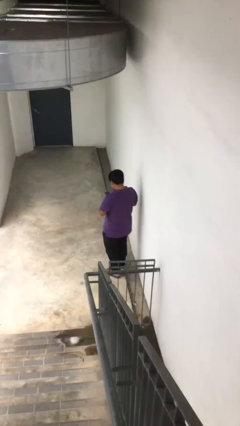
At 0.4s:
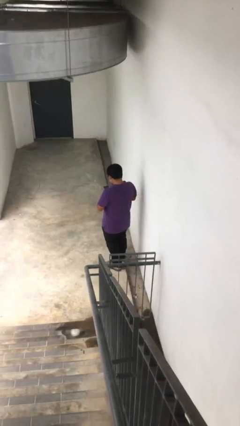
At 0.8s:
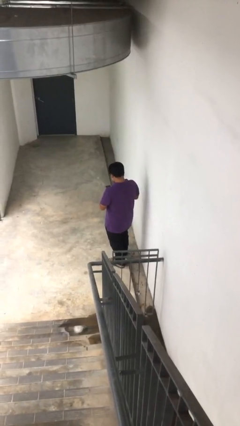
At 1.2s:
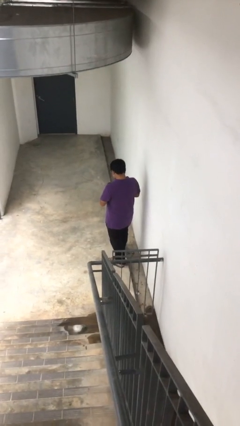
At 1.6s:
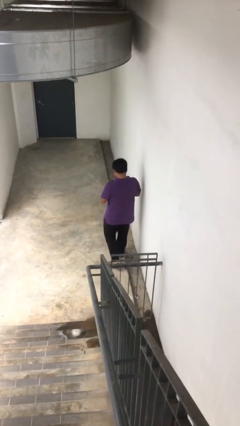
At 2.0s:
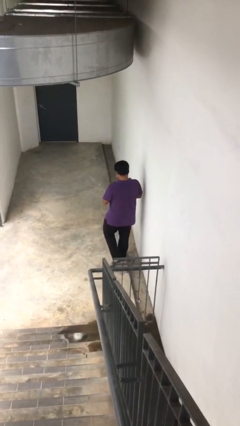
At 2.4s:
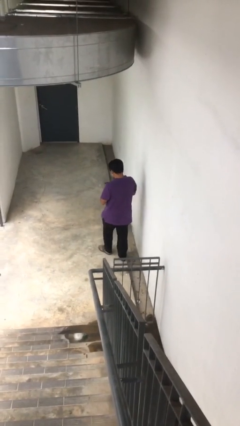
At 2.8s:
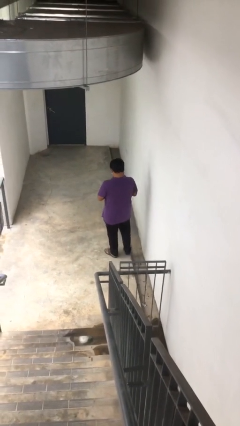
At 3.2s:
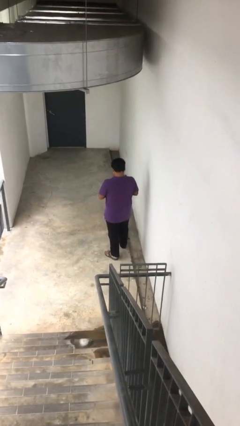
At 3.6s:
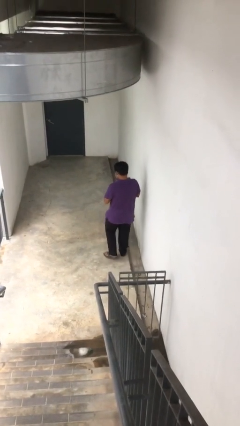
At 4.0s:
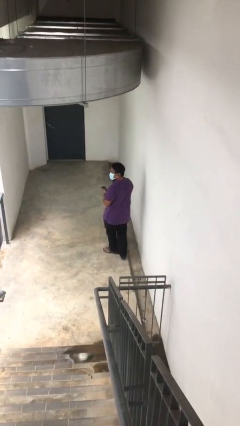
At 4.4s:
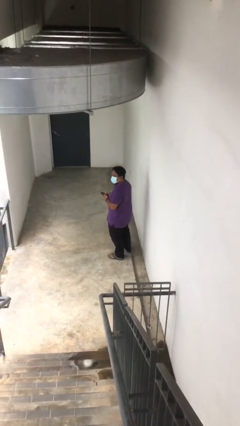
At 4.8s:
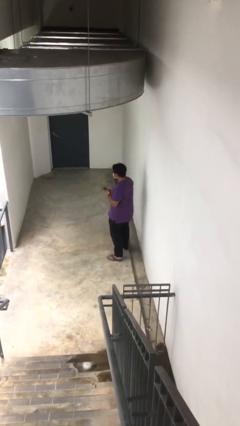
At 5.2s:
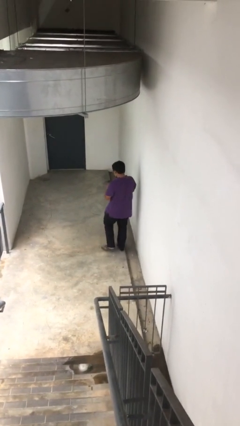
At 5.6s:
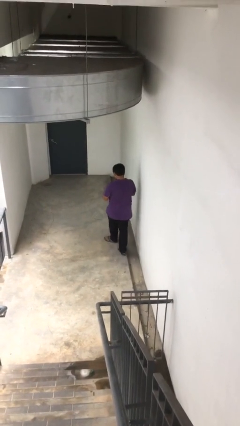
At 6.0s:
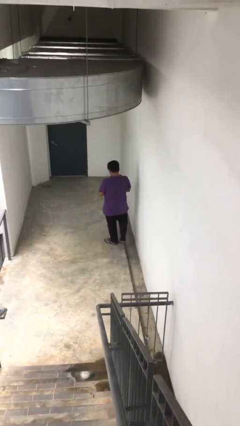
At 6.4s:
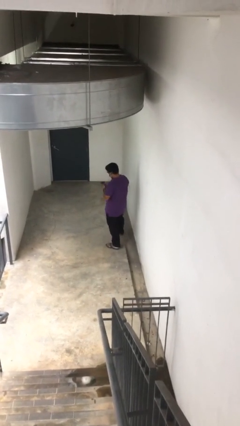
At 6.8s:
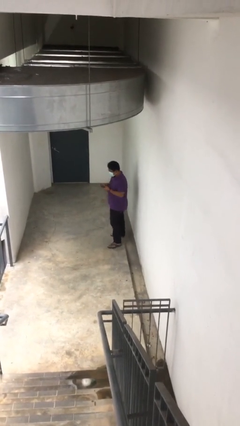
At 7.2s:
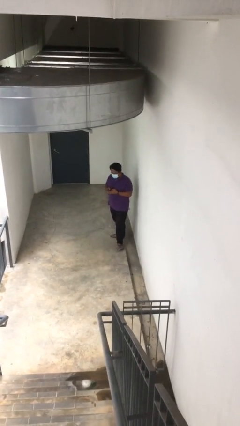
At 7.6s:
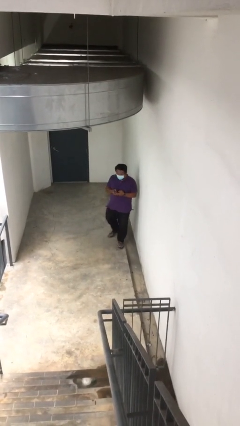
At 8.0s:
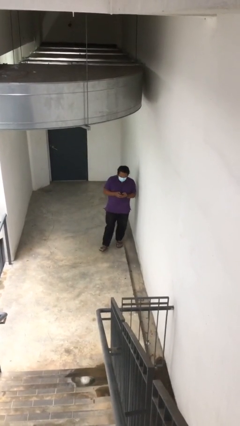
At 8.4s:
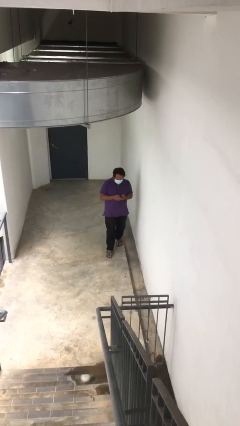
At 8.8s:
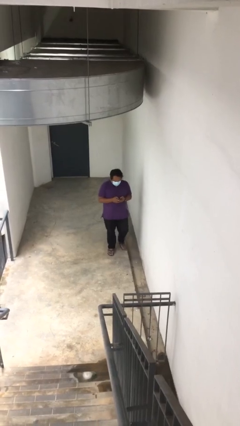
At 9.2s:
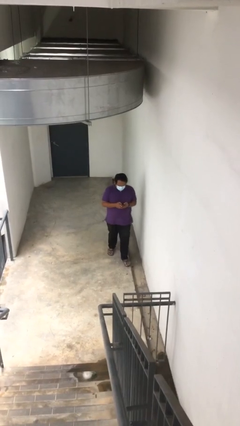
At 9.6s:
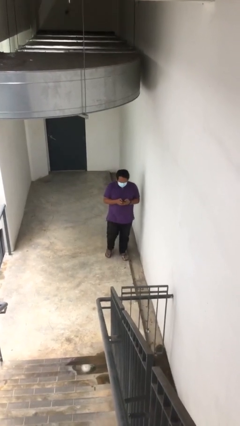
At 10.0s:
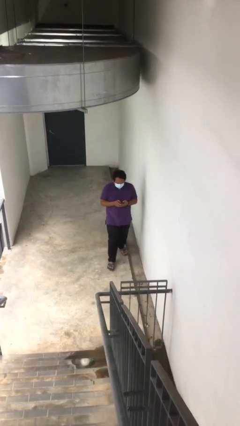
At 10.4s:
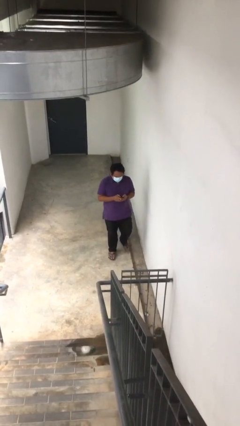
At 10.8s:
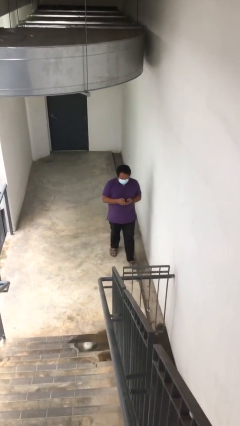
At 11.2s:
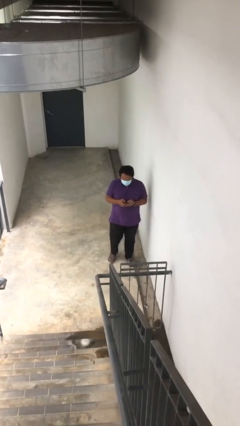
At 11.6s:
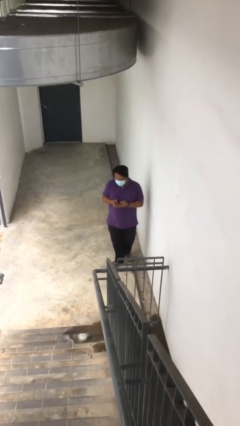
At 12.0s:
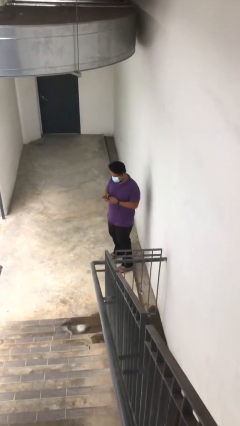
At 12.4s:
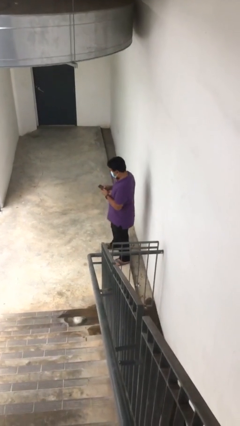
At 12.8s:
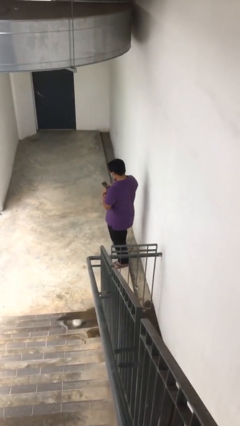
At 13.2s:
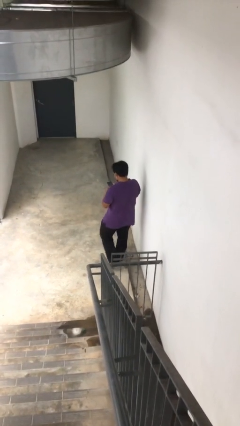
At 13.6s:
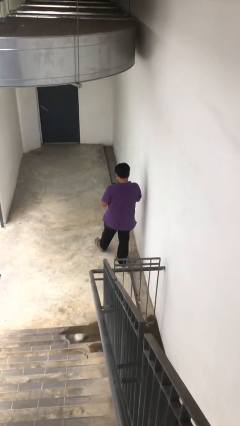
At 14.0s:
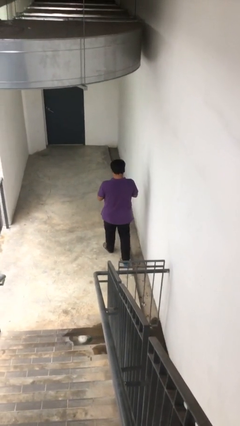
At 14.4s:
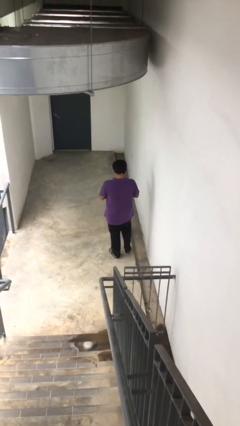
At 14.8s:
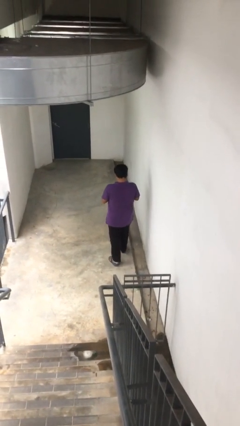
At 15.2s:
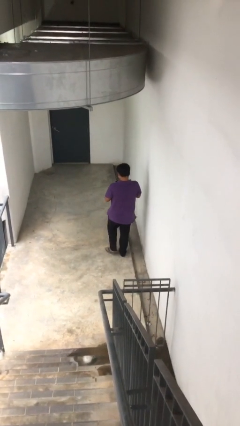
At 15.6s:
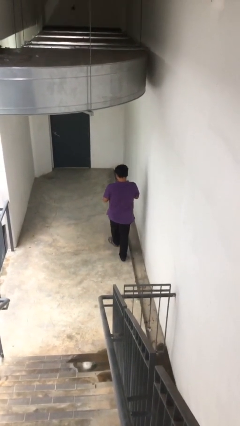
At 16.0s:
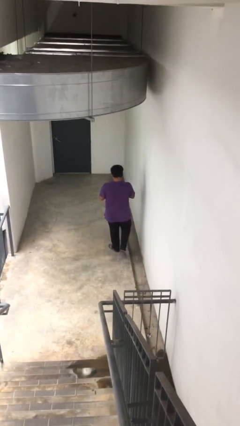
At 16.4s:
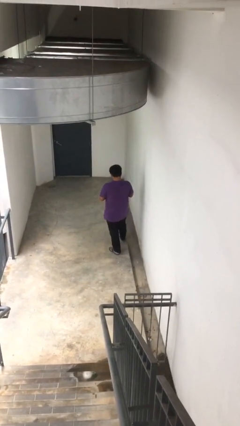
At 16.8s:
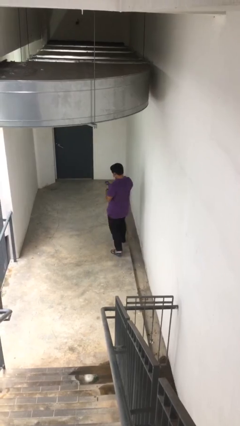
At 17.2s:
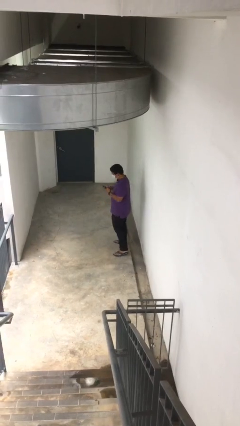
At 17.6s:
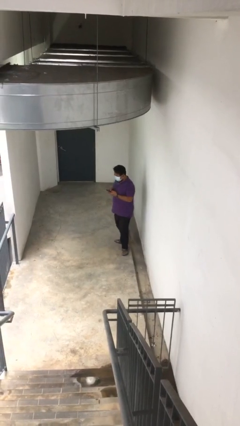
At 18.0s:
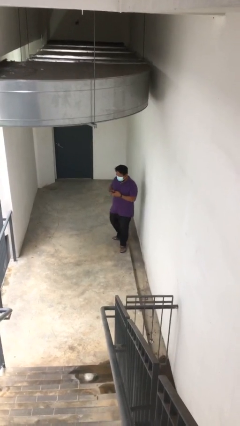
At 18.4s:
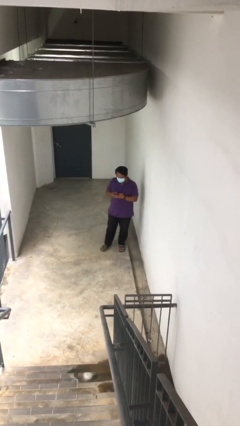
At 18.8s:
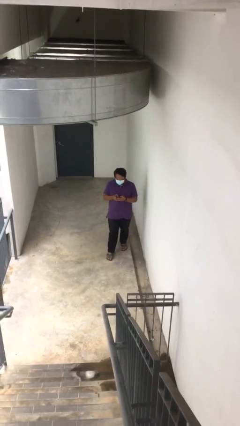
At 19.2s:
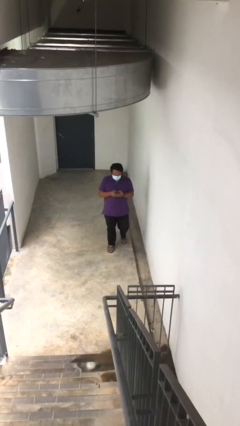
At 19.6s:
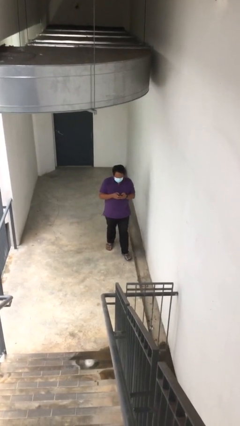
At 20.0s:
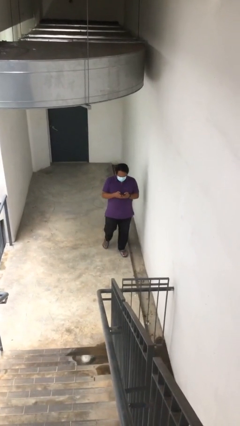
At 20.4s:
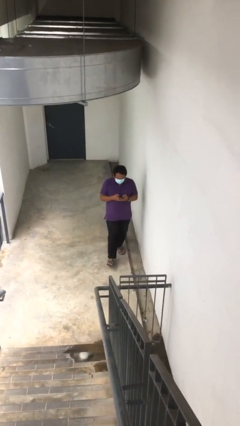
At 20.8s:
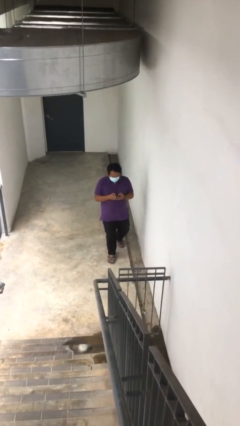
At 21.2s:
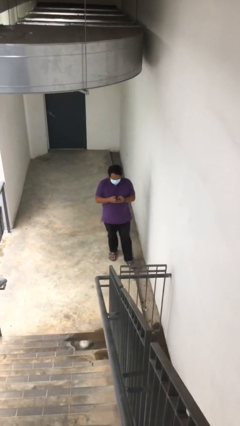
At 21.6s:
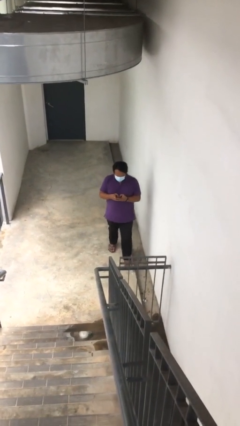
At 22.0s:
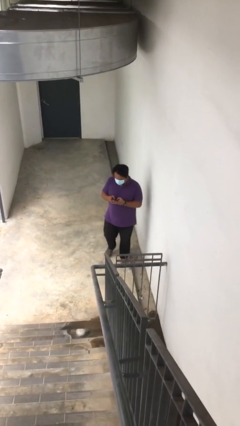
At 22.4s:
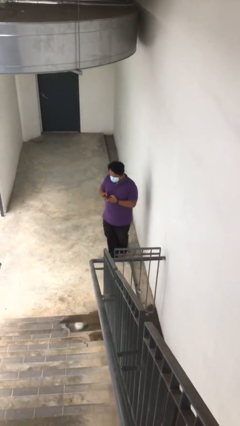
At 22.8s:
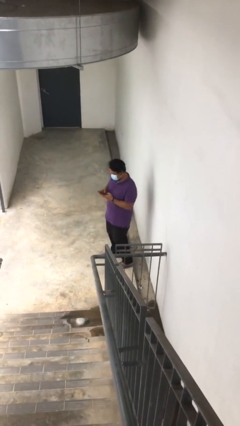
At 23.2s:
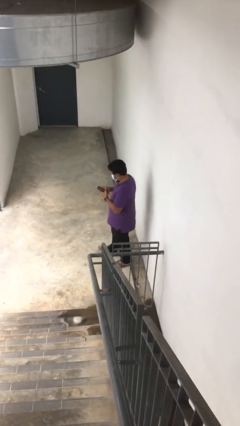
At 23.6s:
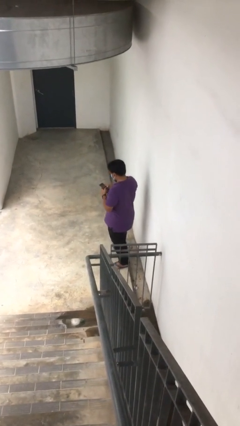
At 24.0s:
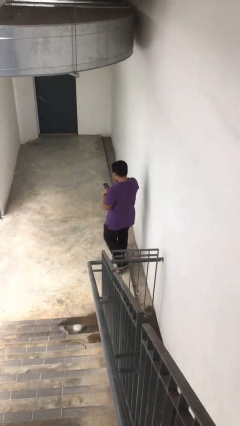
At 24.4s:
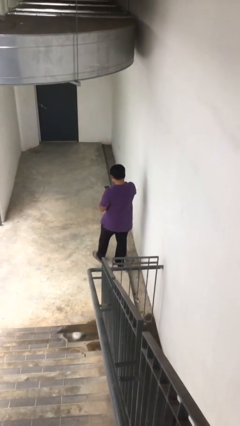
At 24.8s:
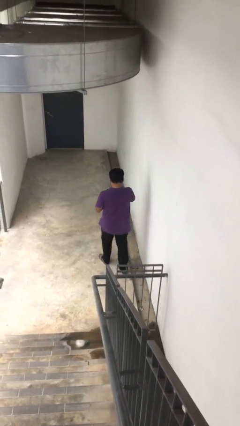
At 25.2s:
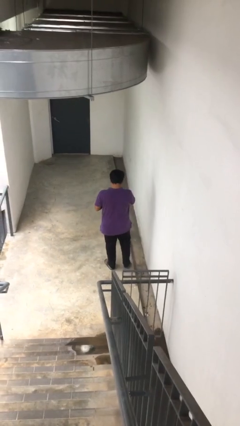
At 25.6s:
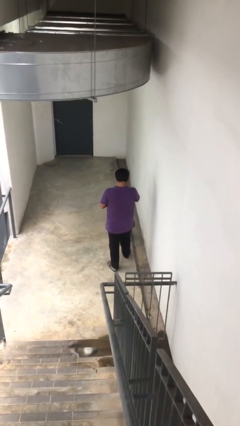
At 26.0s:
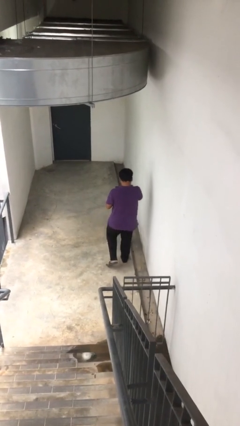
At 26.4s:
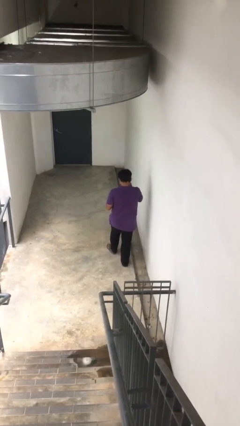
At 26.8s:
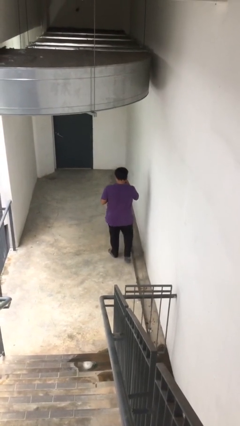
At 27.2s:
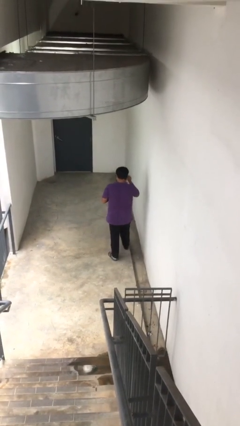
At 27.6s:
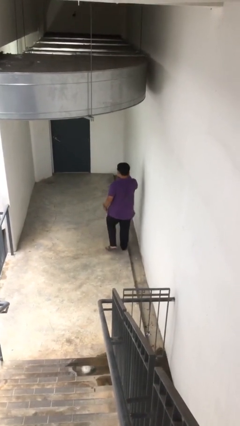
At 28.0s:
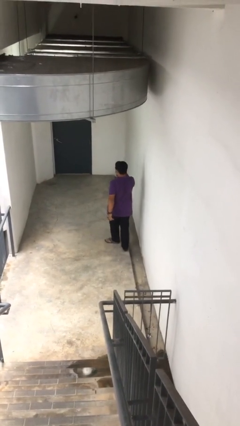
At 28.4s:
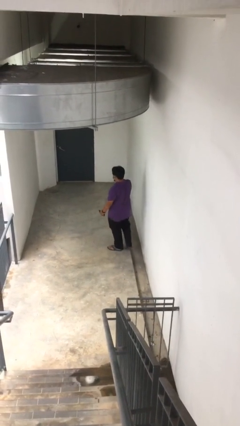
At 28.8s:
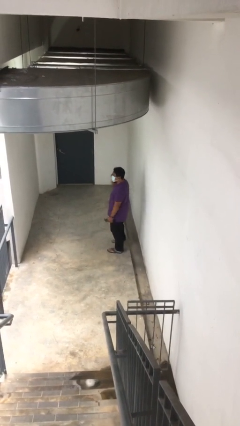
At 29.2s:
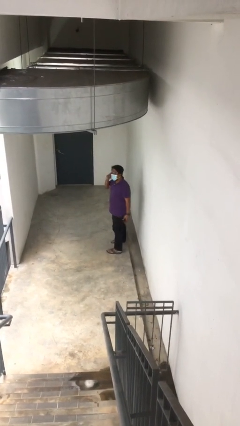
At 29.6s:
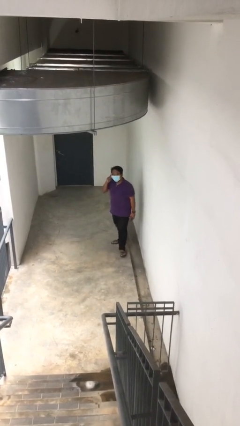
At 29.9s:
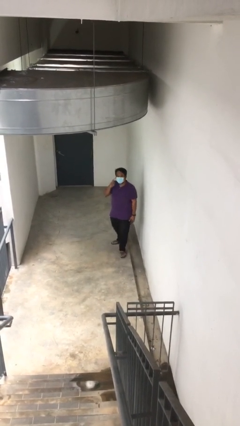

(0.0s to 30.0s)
person walks

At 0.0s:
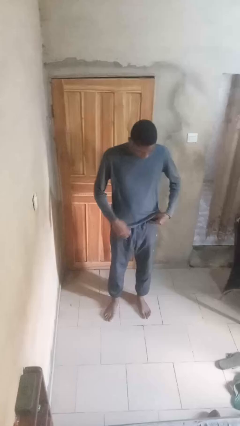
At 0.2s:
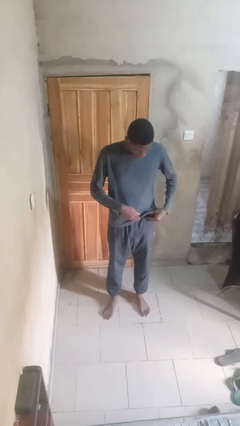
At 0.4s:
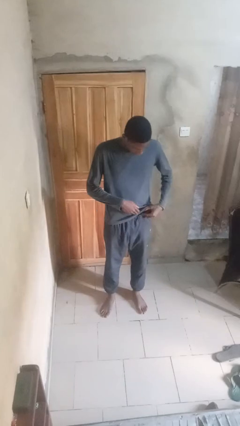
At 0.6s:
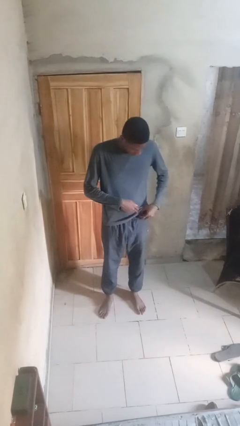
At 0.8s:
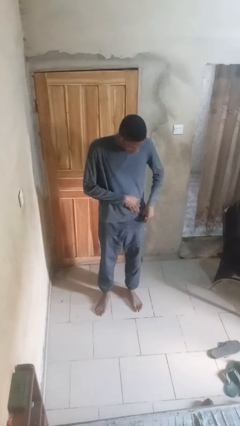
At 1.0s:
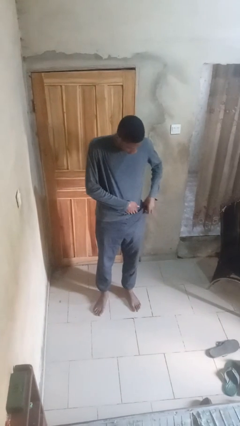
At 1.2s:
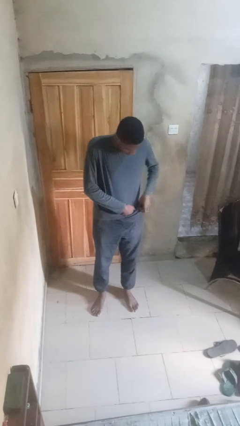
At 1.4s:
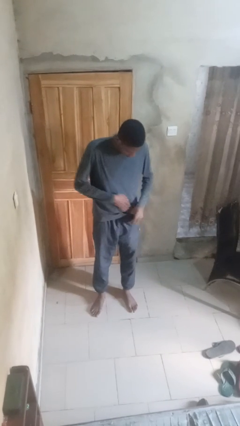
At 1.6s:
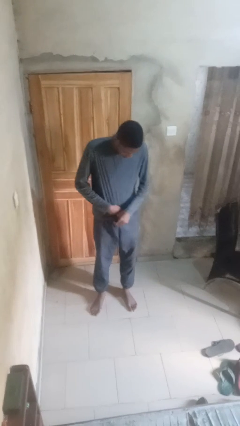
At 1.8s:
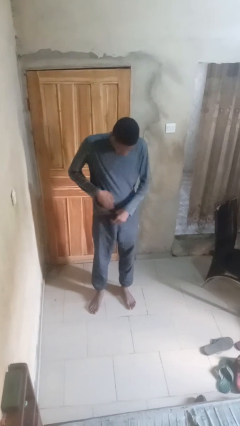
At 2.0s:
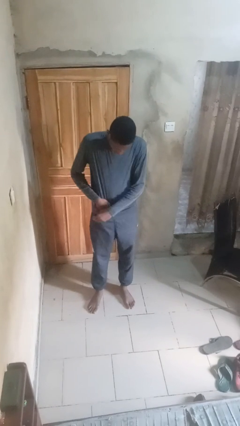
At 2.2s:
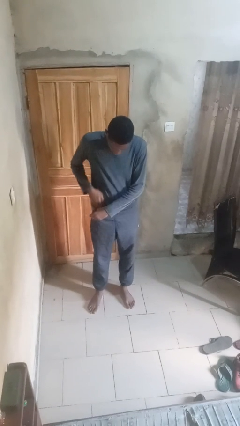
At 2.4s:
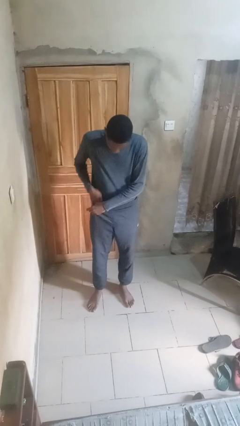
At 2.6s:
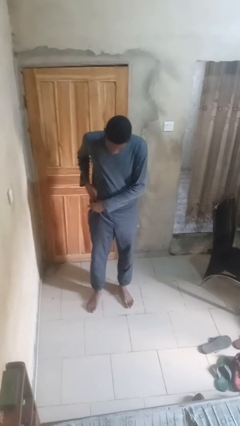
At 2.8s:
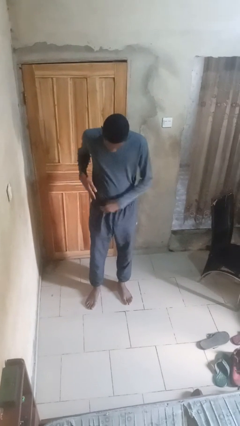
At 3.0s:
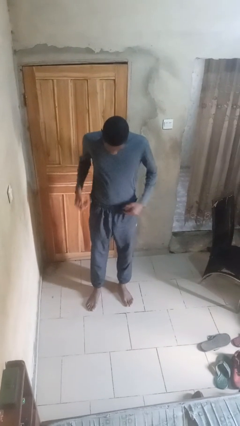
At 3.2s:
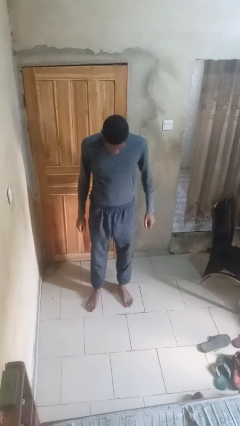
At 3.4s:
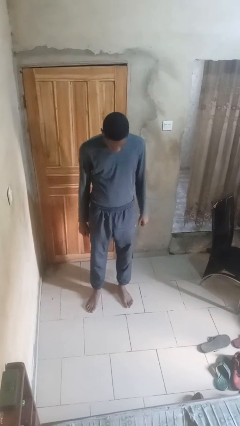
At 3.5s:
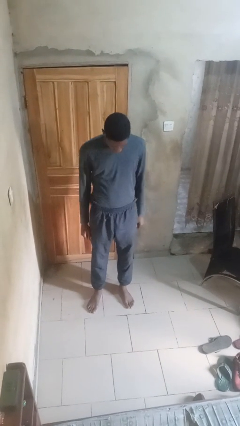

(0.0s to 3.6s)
person tucks in shirt
